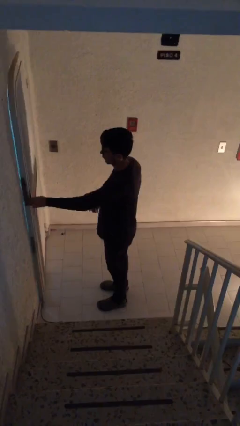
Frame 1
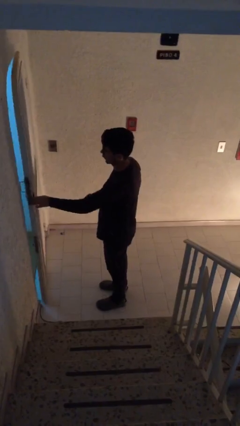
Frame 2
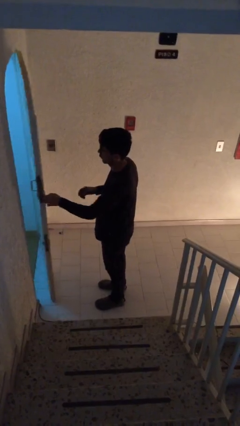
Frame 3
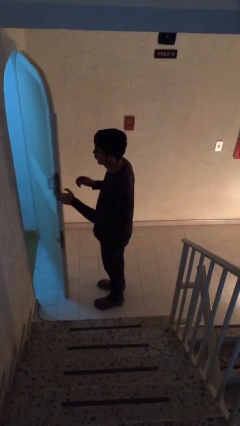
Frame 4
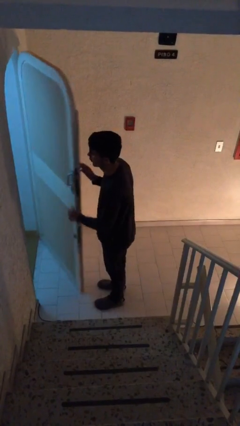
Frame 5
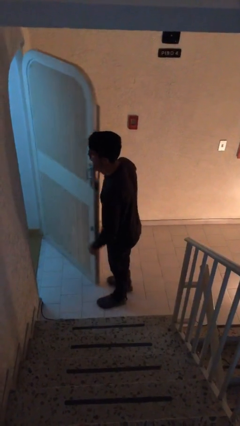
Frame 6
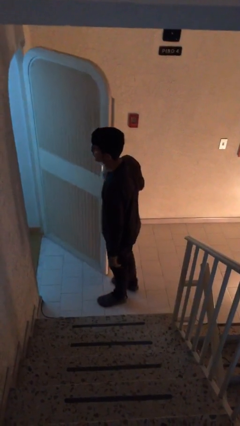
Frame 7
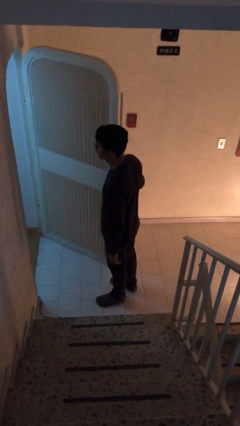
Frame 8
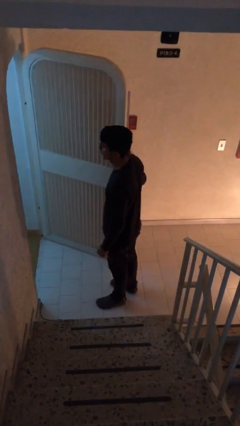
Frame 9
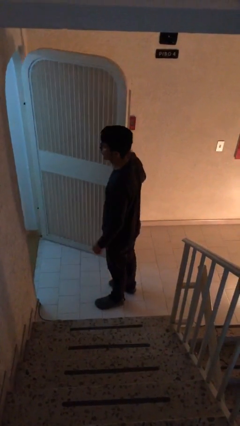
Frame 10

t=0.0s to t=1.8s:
person opens facility door

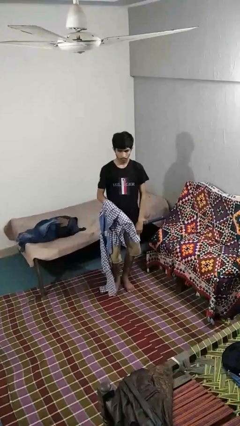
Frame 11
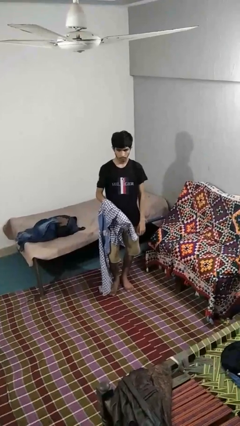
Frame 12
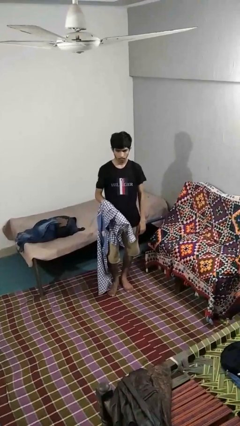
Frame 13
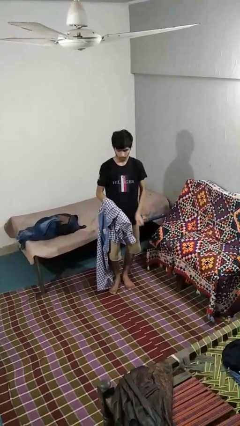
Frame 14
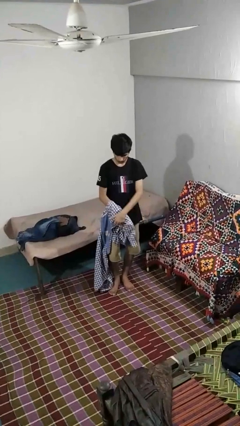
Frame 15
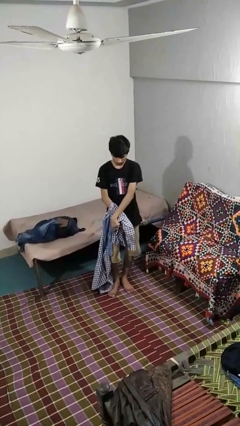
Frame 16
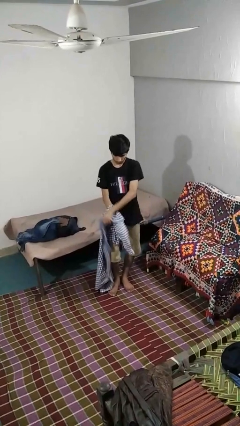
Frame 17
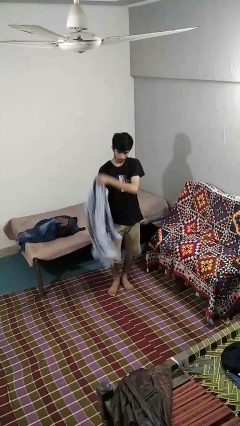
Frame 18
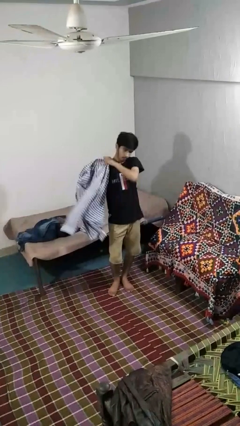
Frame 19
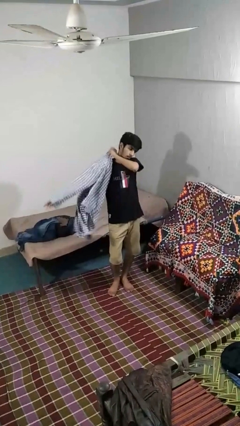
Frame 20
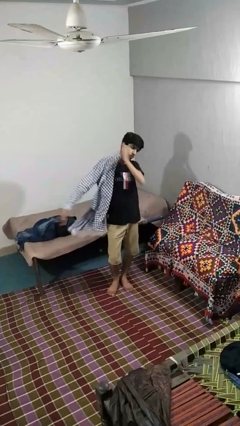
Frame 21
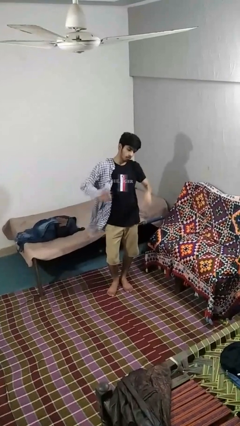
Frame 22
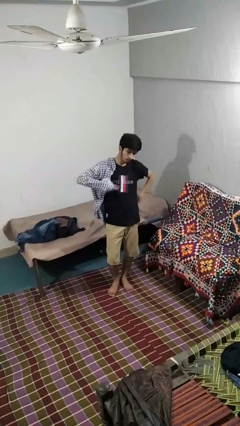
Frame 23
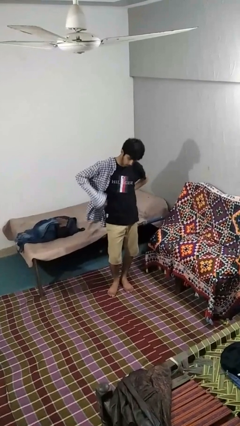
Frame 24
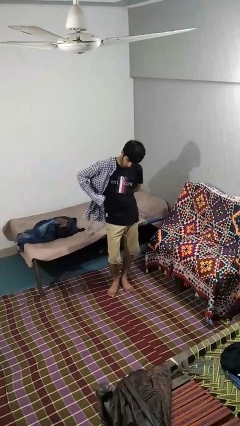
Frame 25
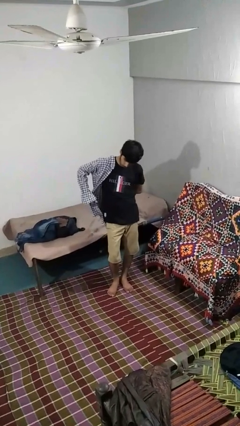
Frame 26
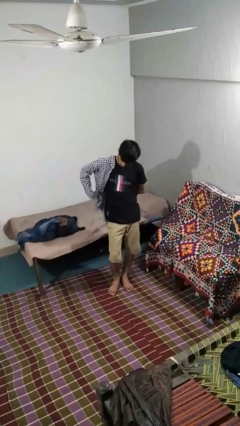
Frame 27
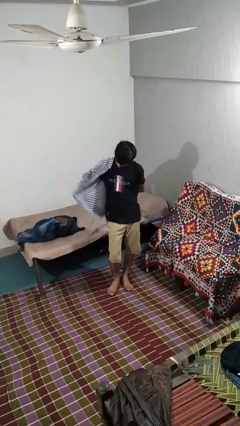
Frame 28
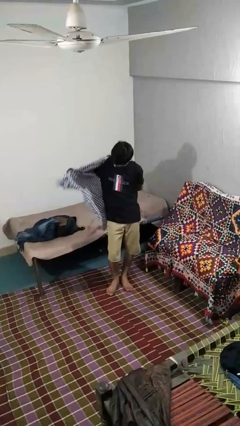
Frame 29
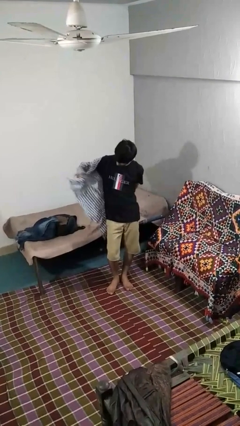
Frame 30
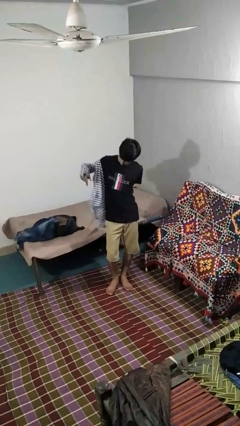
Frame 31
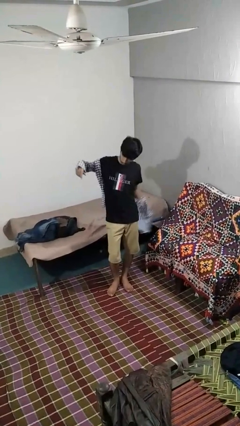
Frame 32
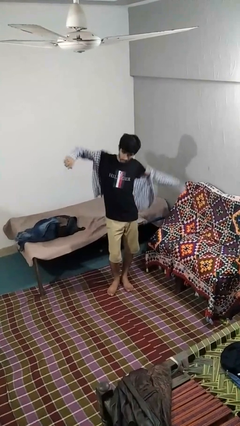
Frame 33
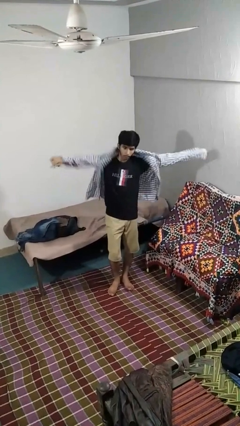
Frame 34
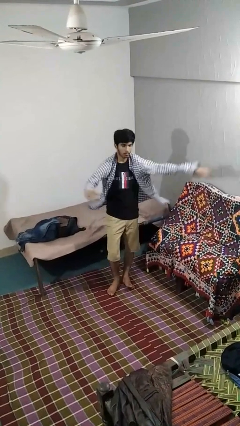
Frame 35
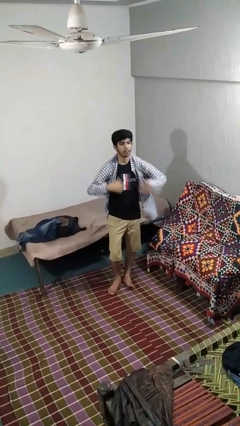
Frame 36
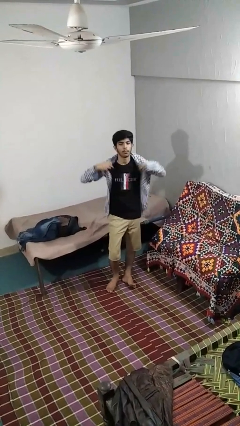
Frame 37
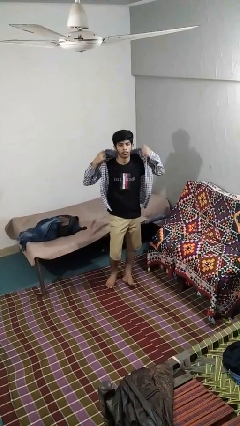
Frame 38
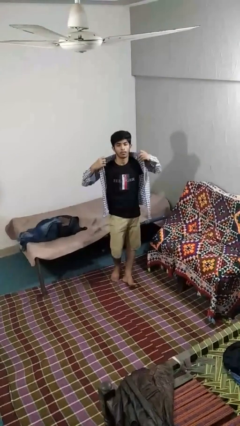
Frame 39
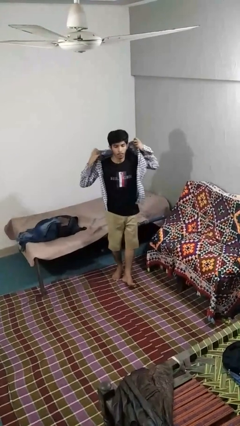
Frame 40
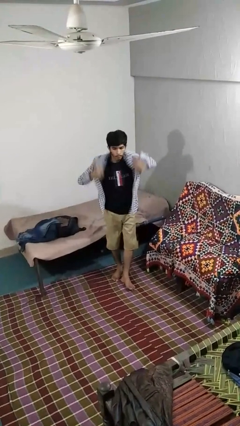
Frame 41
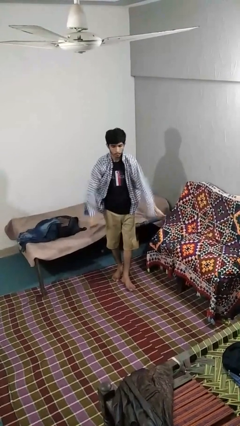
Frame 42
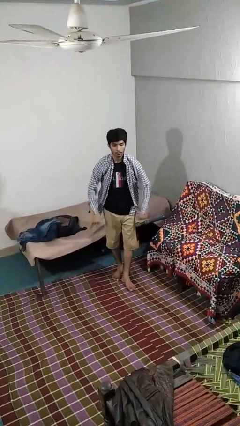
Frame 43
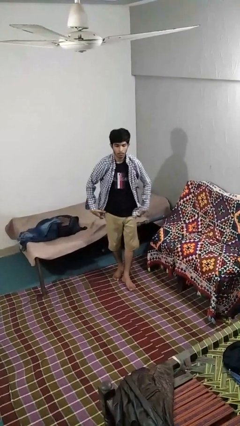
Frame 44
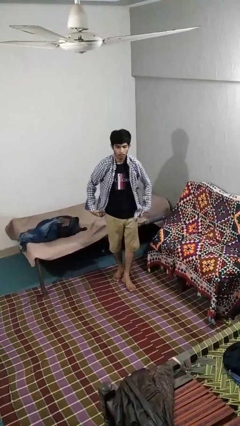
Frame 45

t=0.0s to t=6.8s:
person puts on shirt

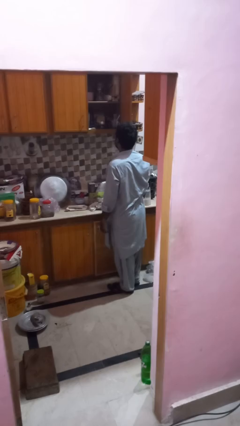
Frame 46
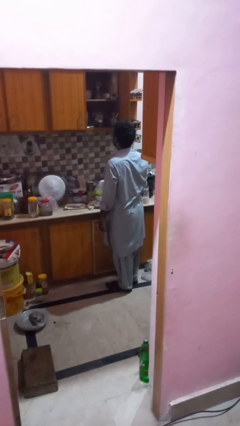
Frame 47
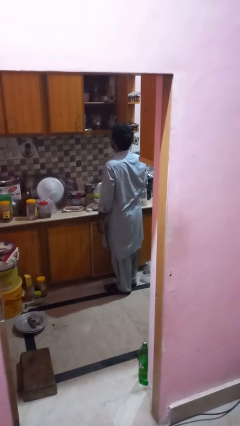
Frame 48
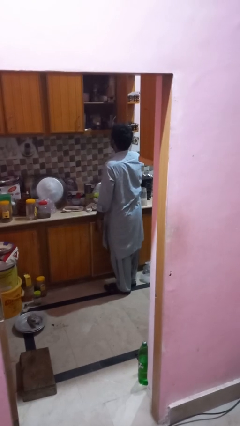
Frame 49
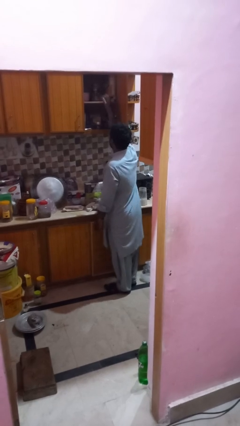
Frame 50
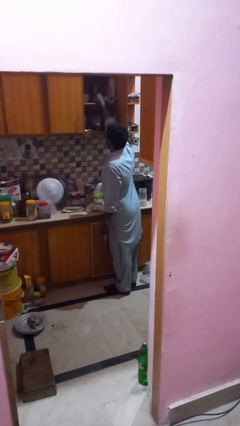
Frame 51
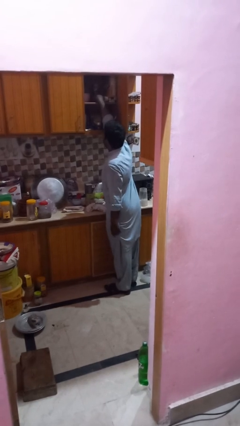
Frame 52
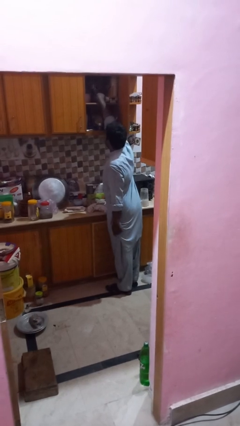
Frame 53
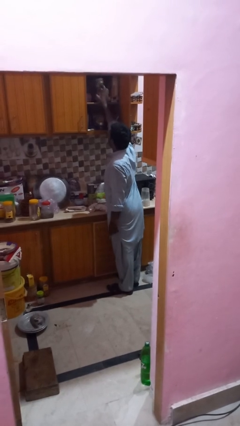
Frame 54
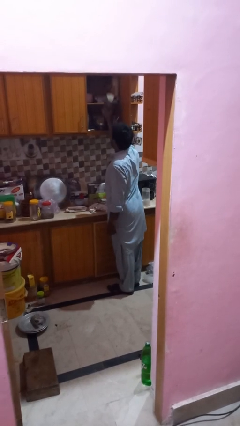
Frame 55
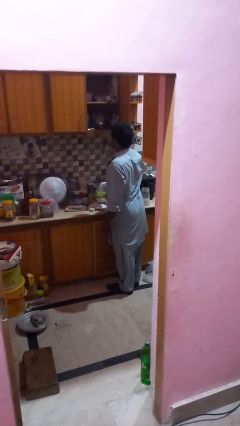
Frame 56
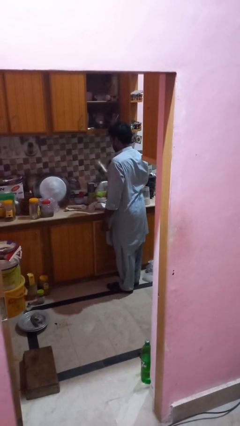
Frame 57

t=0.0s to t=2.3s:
person takes object from cabinet

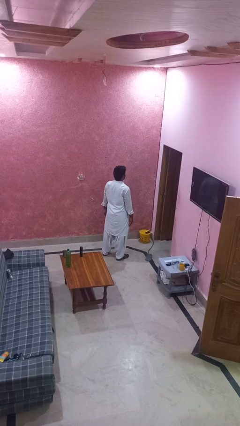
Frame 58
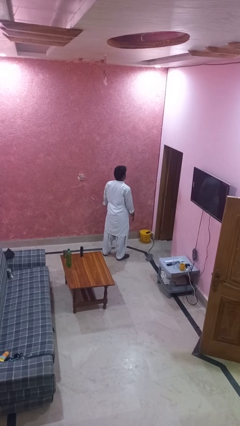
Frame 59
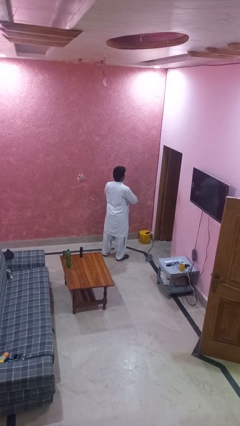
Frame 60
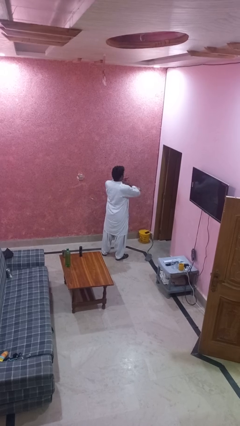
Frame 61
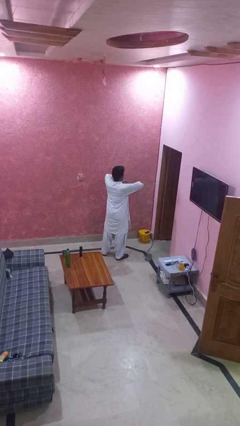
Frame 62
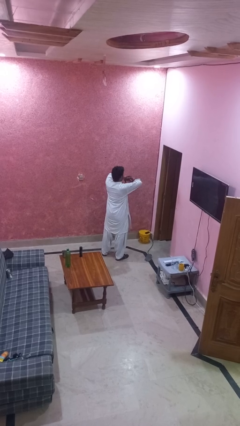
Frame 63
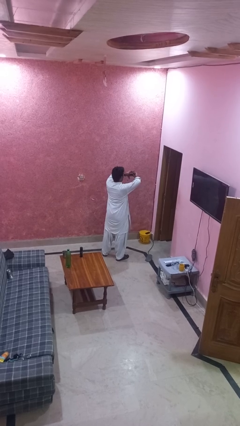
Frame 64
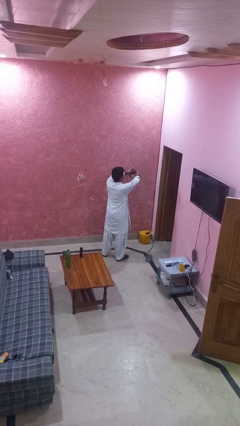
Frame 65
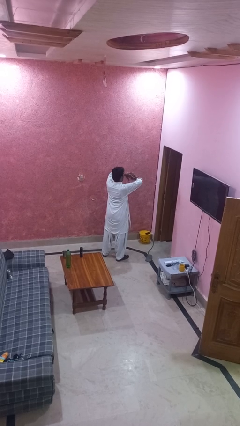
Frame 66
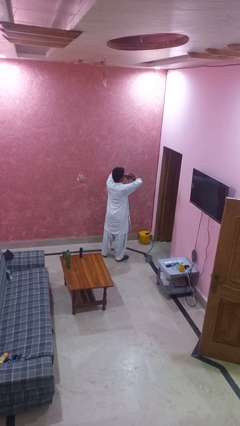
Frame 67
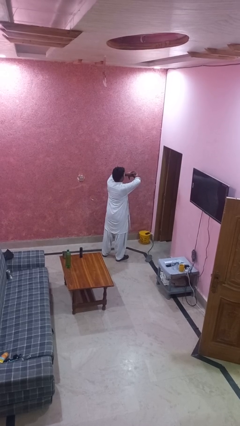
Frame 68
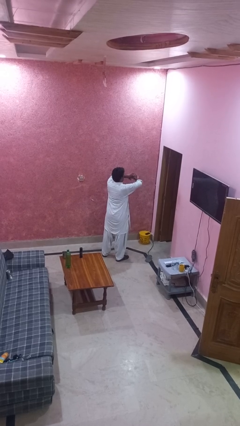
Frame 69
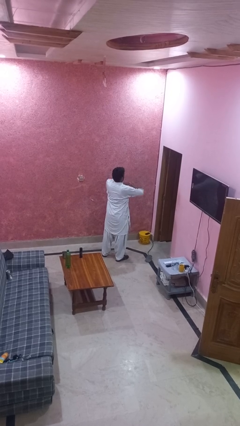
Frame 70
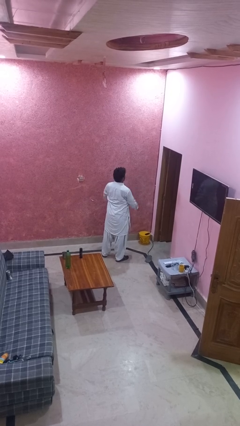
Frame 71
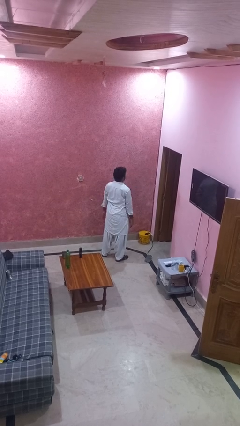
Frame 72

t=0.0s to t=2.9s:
person snaps fingers

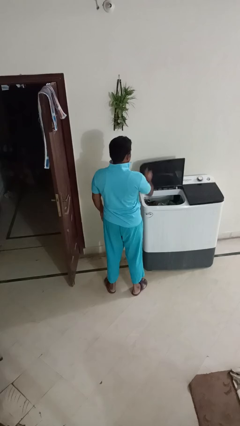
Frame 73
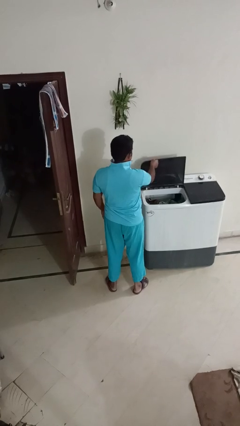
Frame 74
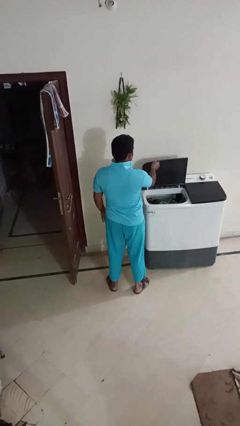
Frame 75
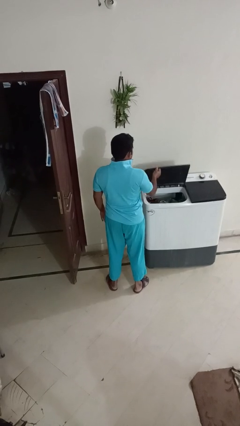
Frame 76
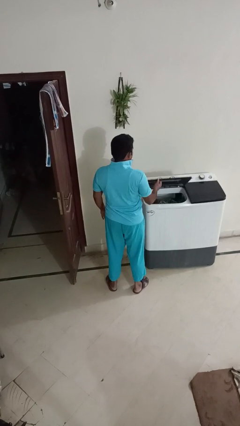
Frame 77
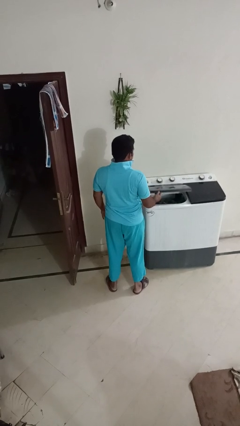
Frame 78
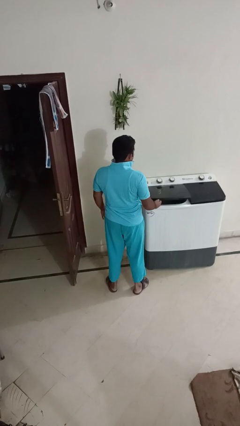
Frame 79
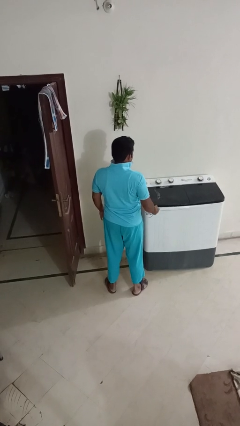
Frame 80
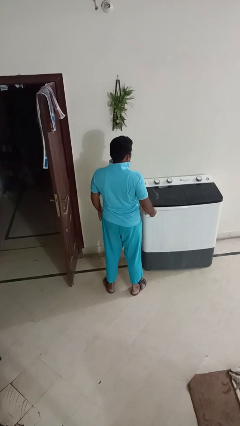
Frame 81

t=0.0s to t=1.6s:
person closes clothes washer

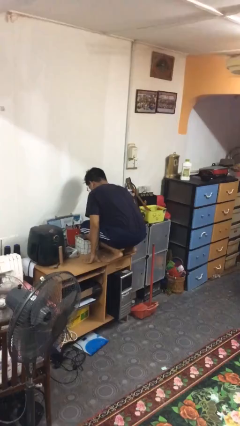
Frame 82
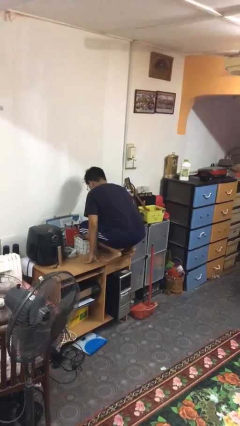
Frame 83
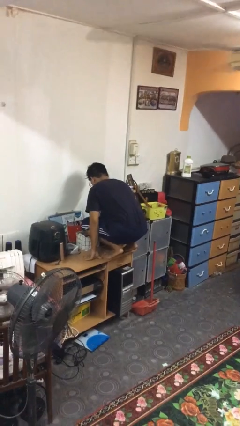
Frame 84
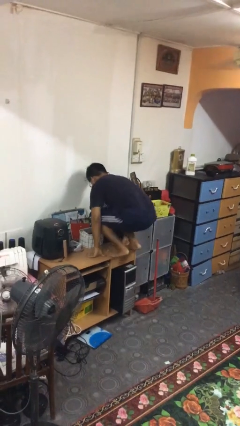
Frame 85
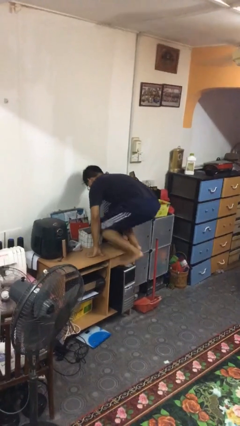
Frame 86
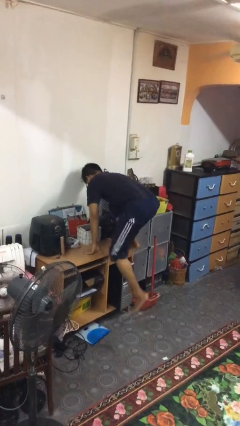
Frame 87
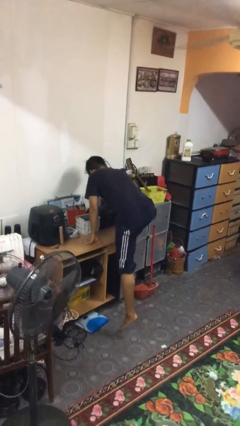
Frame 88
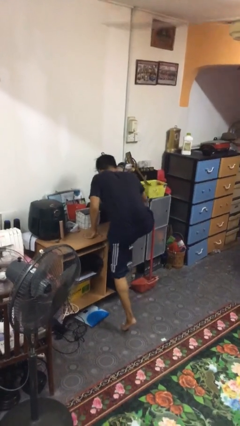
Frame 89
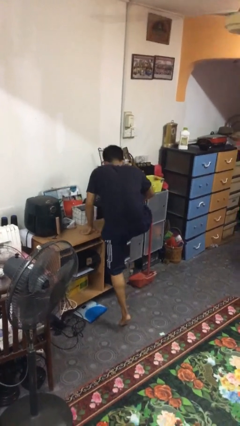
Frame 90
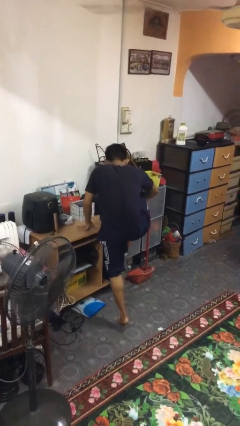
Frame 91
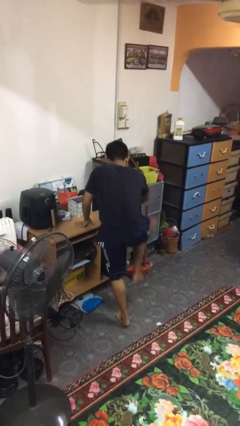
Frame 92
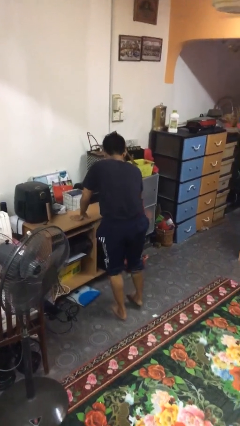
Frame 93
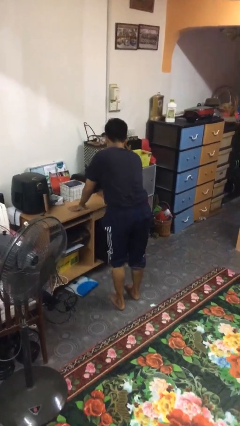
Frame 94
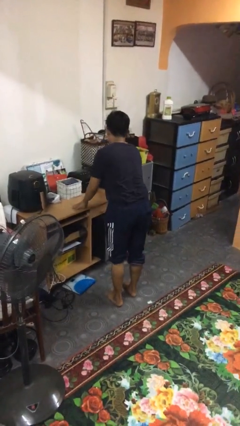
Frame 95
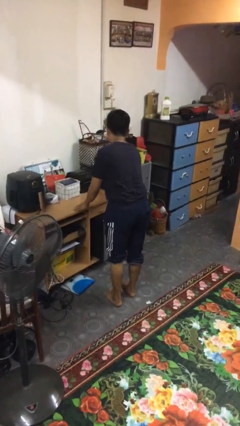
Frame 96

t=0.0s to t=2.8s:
person climbs off table
